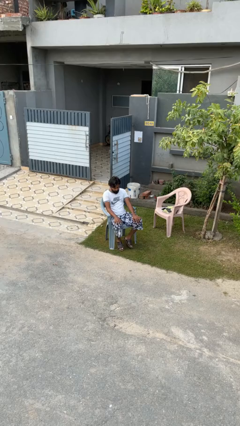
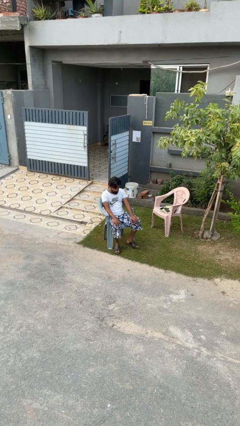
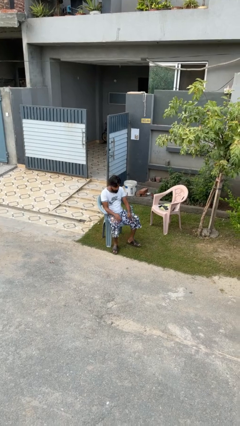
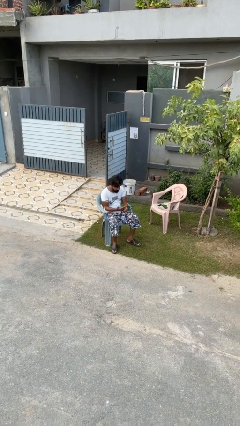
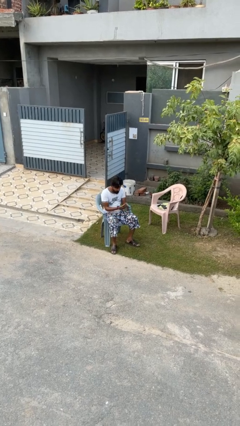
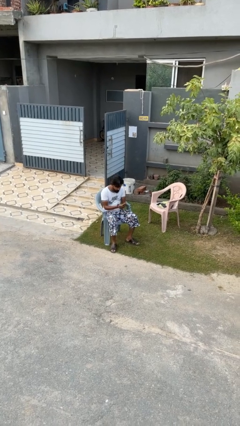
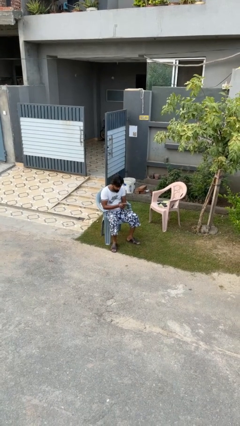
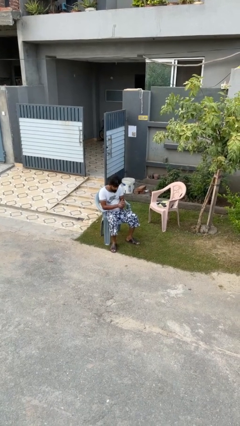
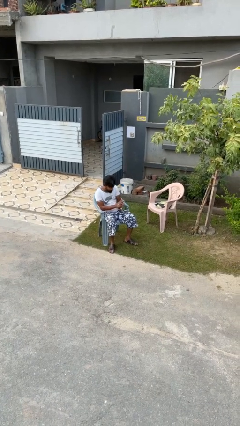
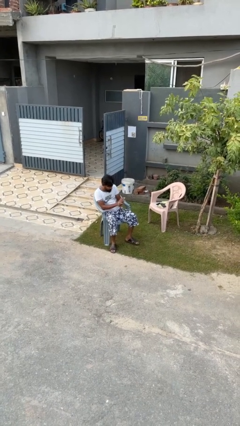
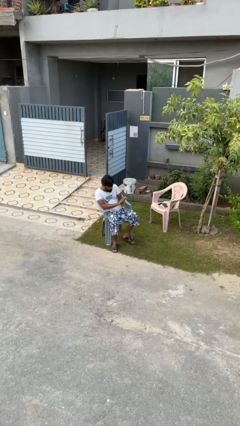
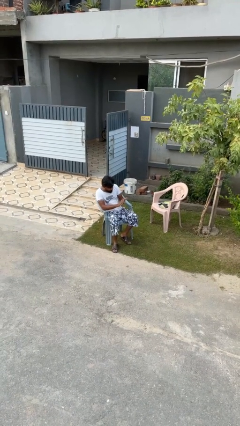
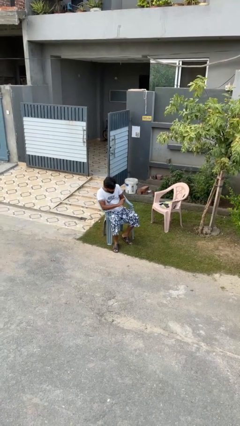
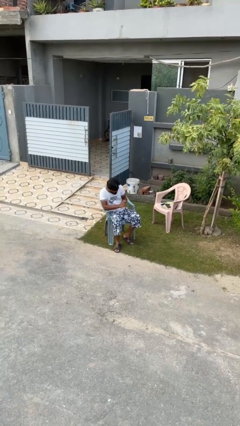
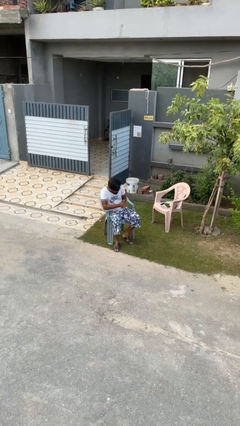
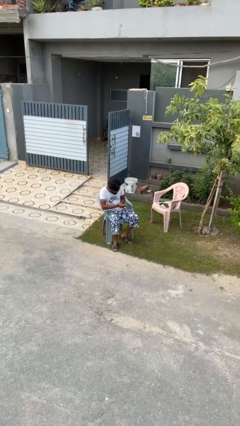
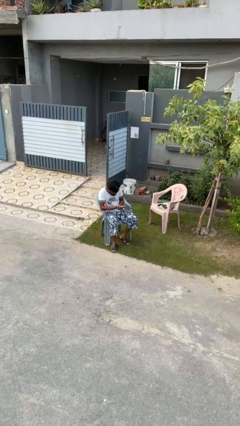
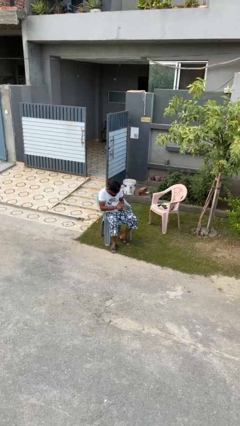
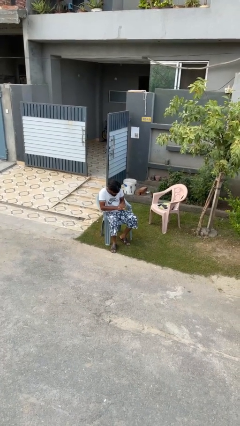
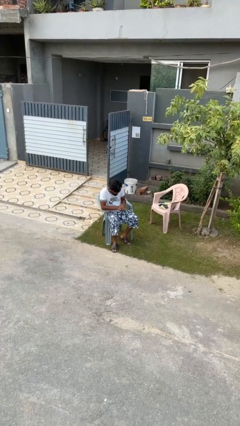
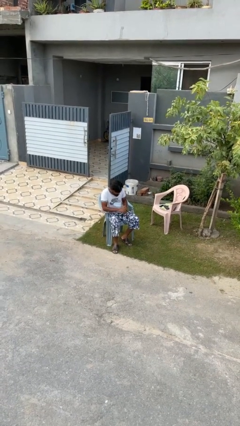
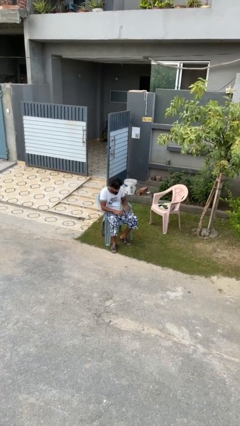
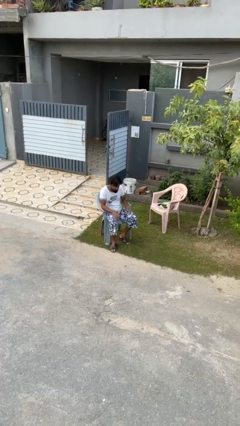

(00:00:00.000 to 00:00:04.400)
person looks at hands in lap

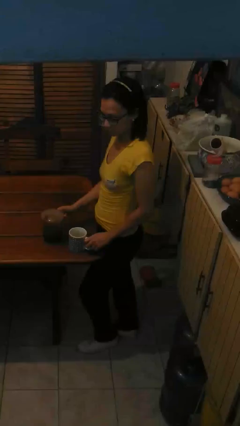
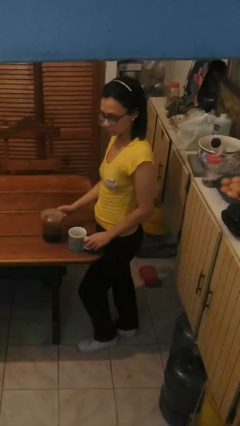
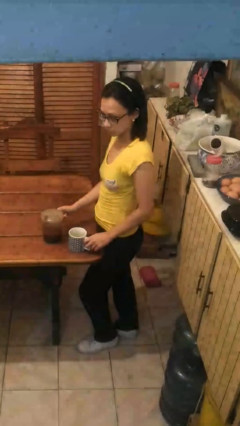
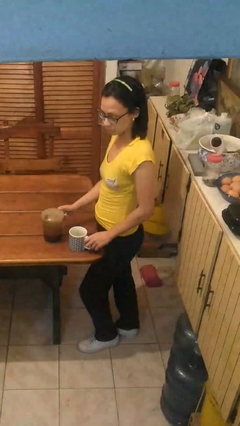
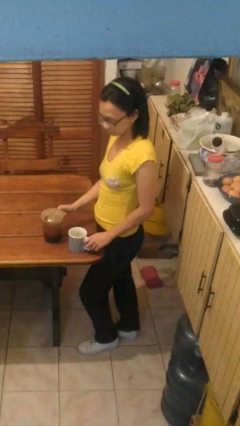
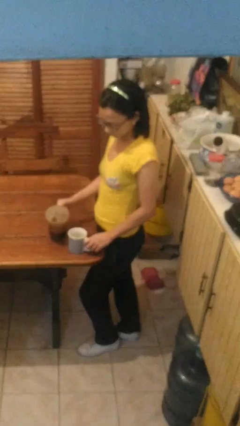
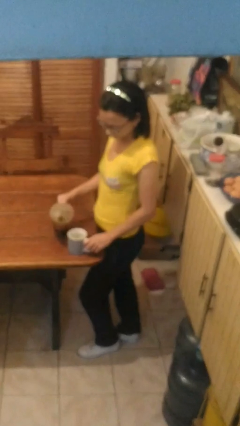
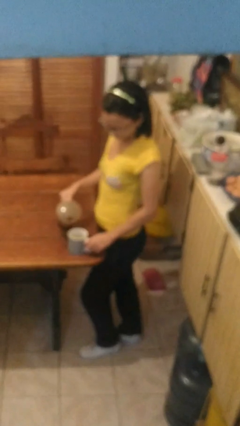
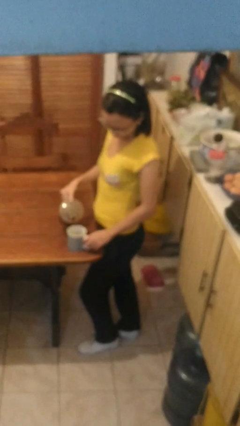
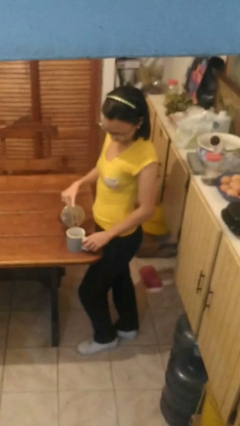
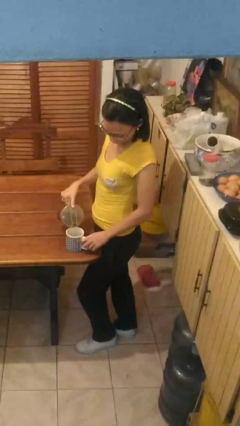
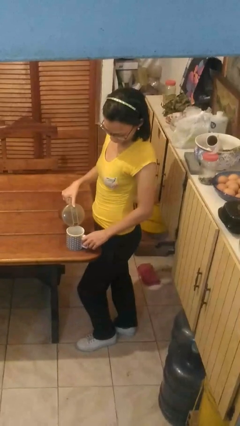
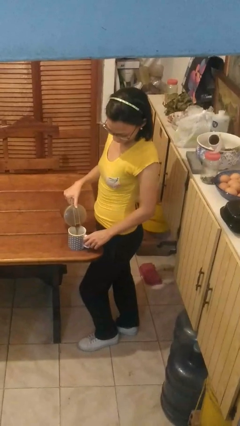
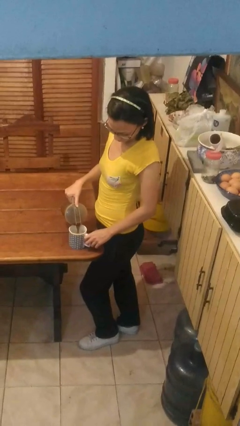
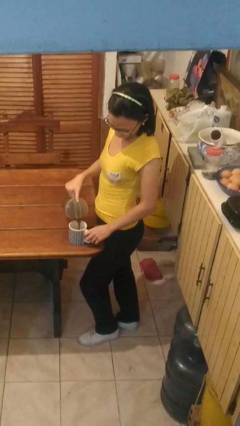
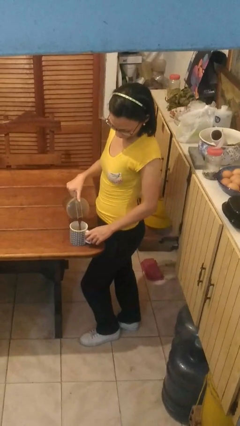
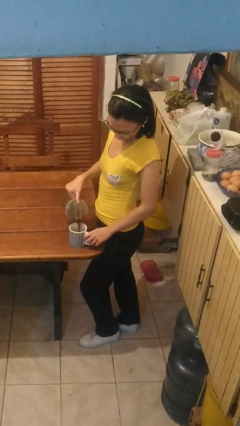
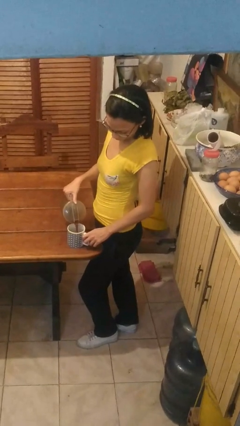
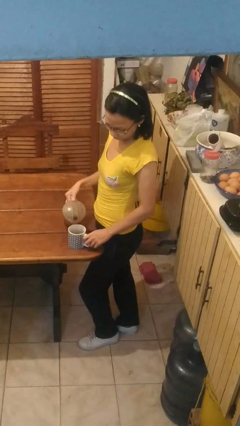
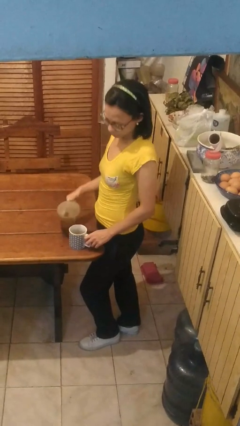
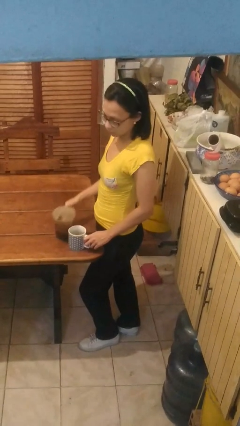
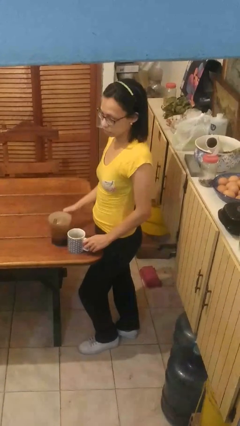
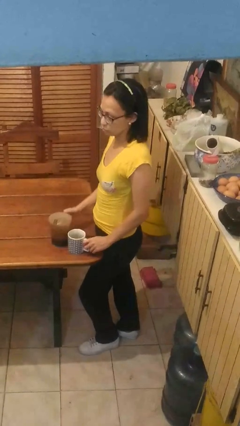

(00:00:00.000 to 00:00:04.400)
person pours coffee into mug

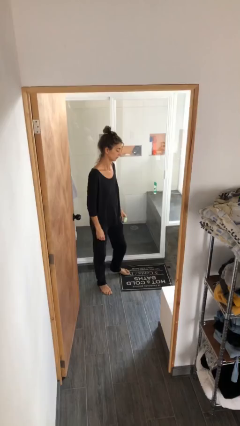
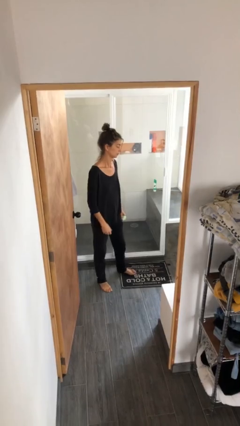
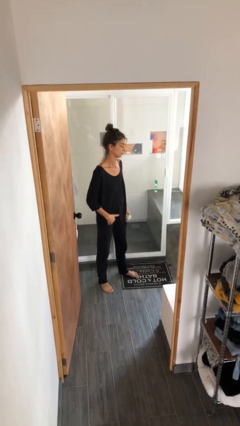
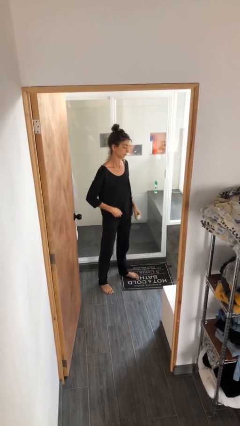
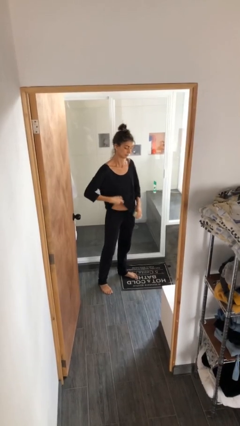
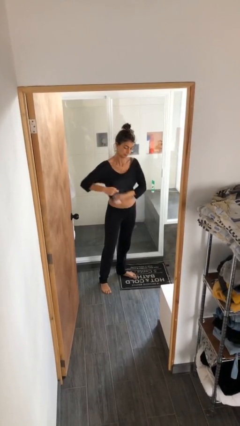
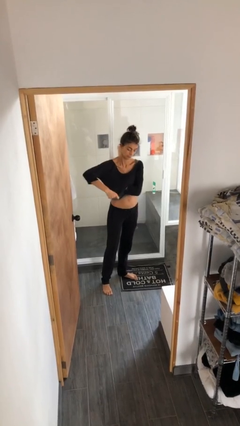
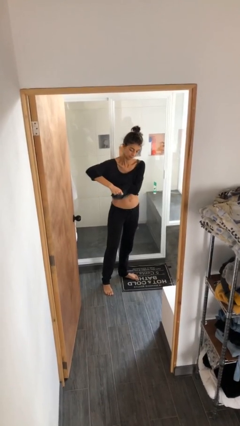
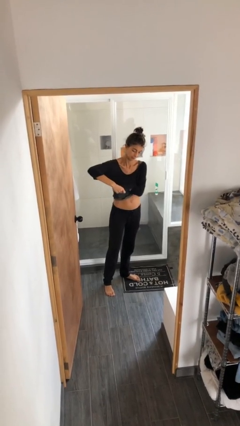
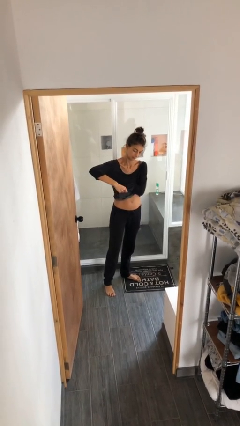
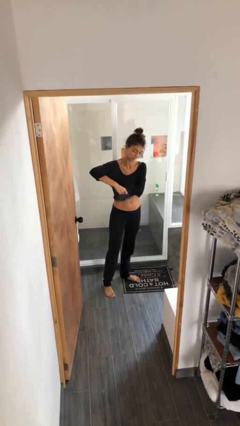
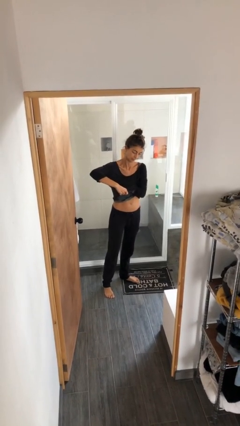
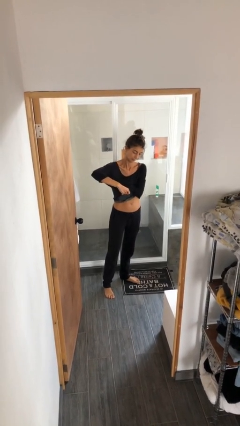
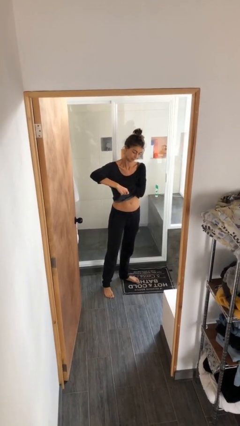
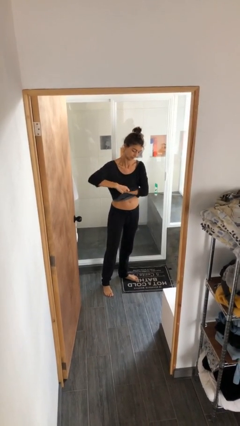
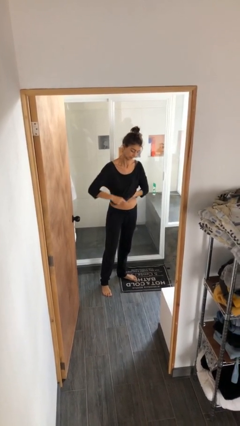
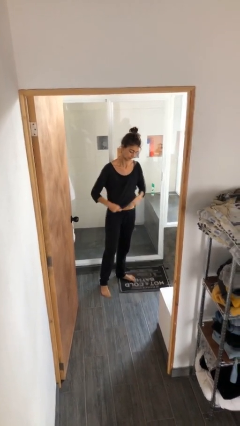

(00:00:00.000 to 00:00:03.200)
person applies deodorant

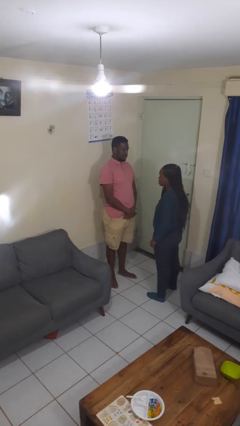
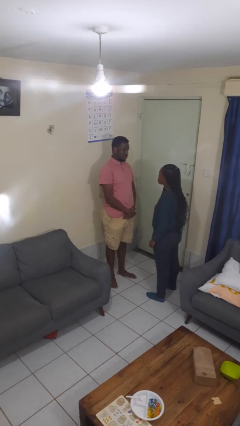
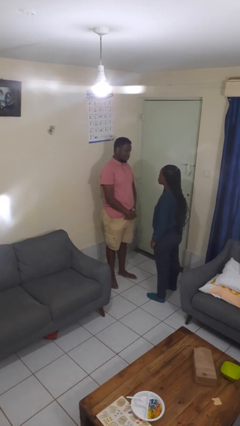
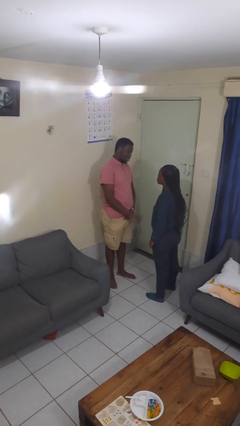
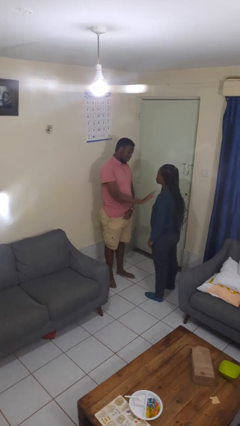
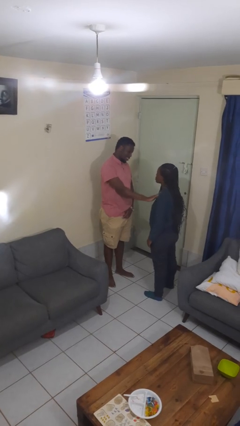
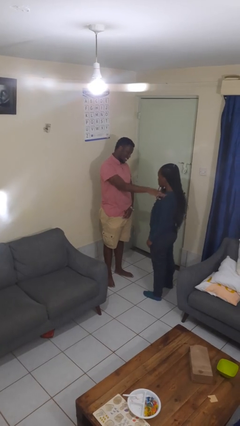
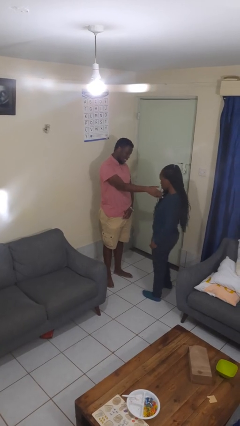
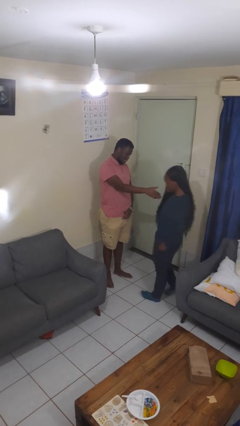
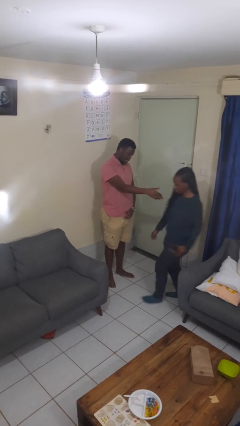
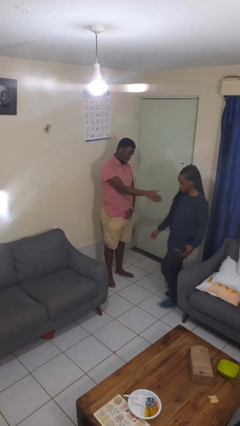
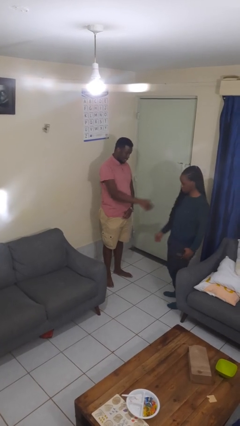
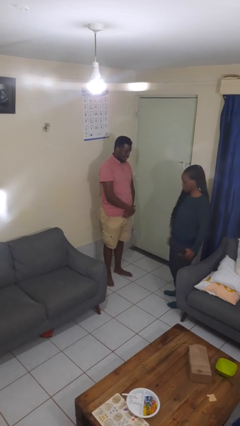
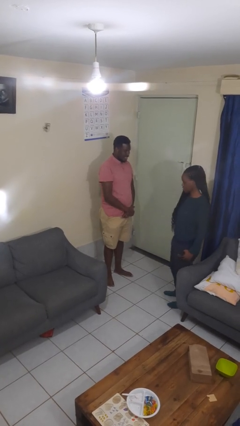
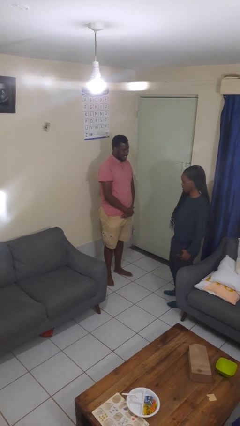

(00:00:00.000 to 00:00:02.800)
person shoves person

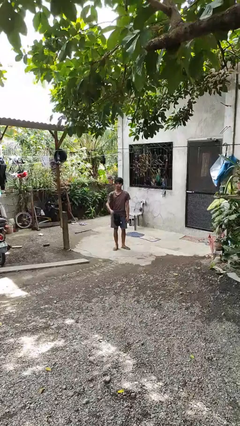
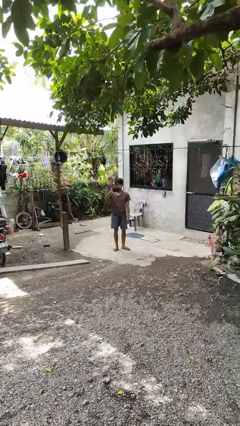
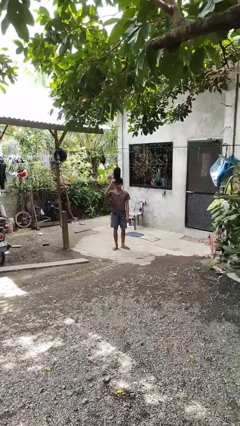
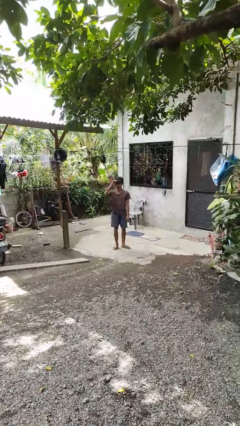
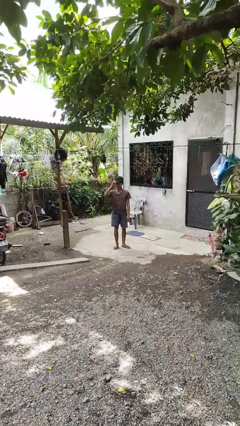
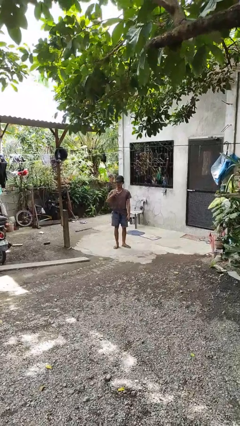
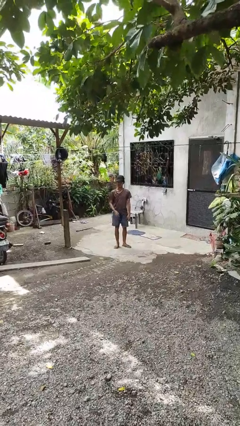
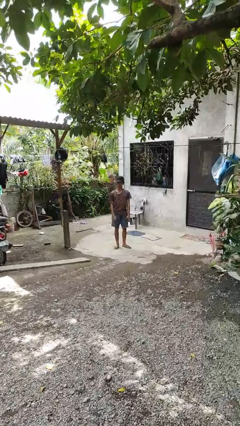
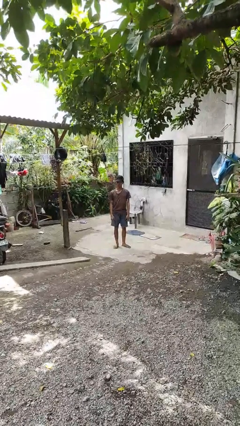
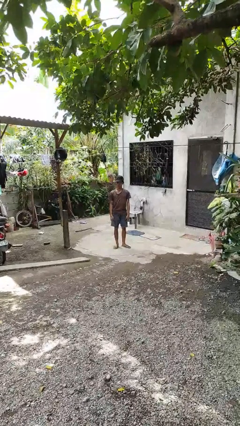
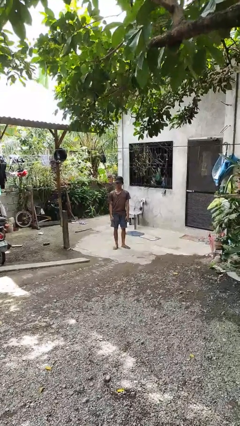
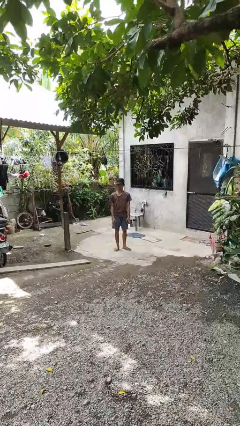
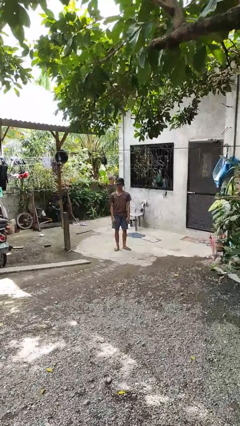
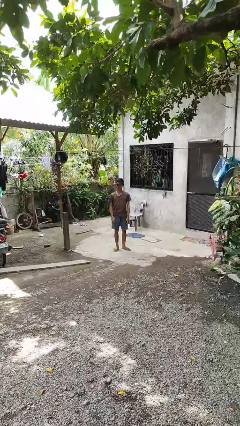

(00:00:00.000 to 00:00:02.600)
person puts on hat
